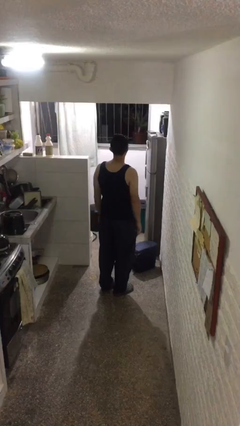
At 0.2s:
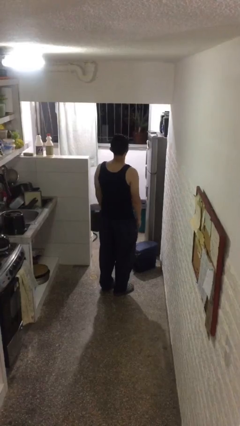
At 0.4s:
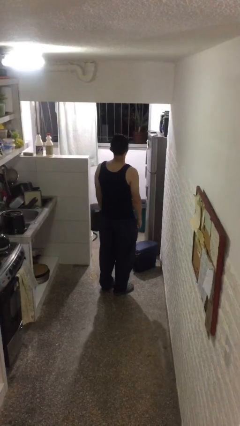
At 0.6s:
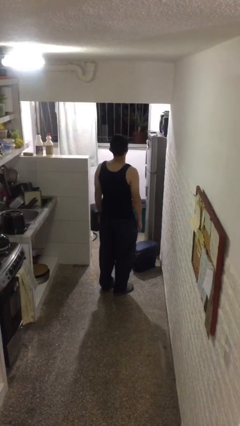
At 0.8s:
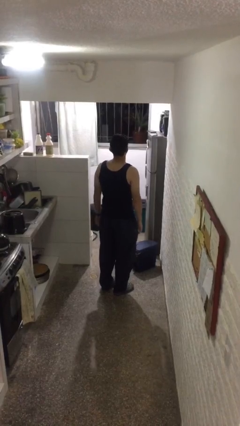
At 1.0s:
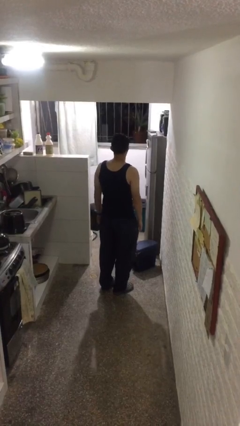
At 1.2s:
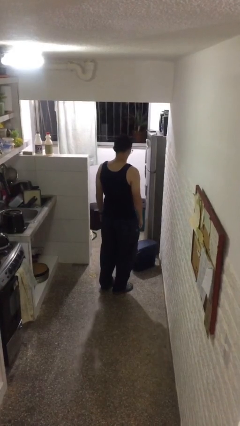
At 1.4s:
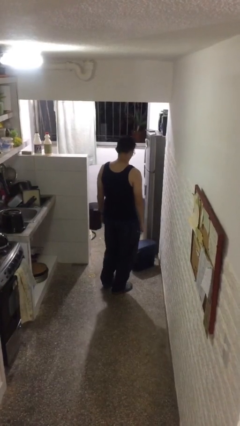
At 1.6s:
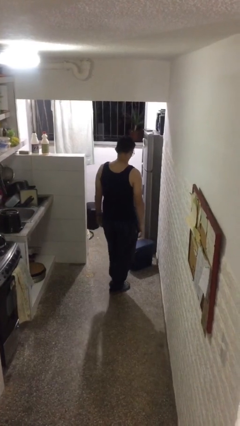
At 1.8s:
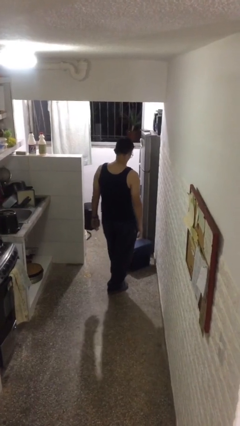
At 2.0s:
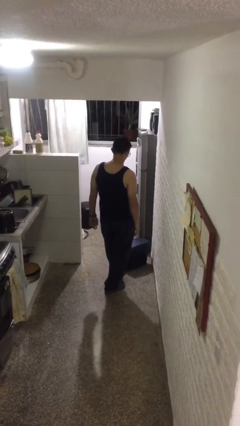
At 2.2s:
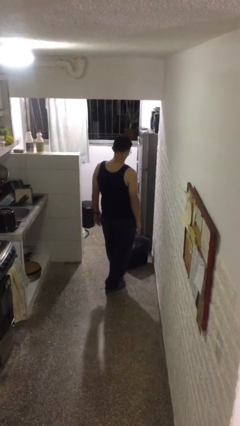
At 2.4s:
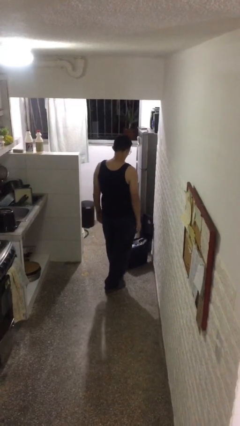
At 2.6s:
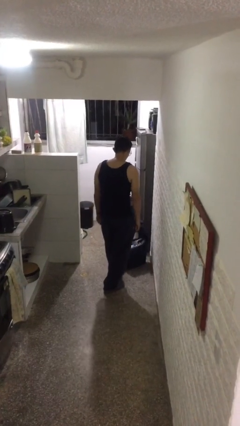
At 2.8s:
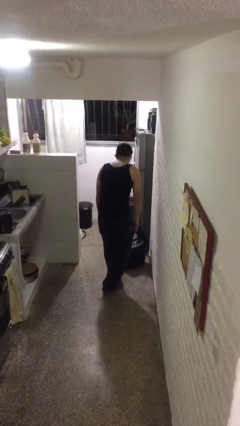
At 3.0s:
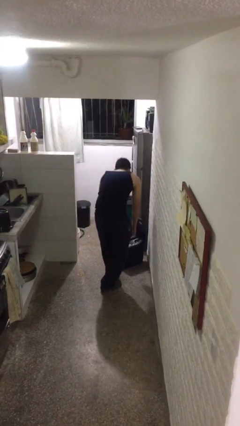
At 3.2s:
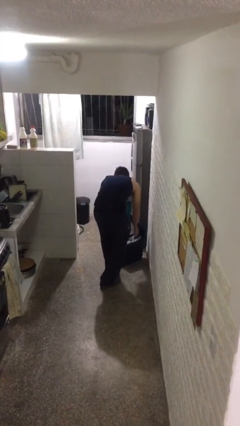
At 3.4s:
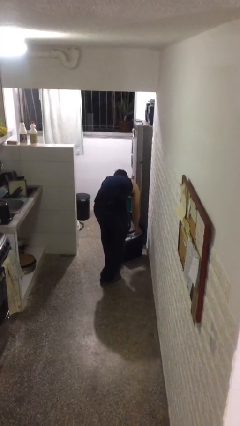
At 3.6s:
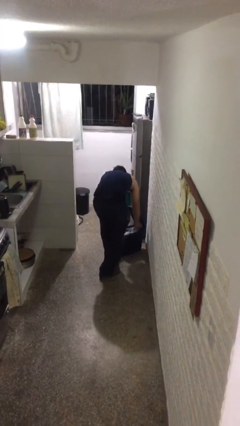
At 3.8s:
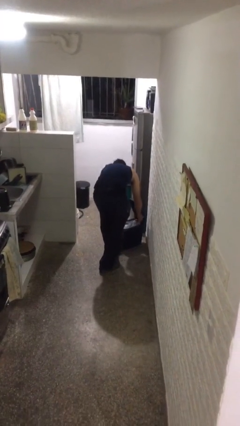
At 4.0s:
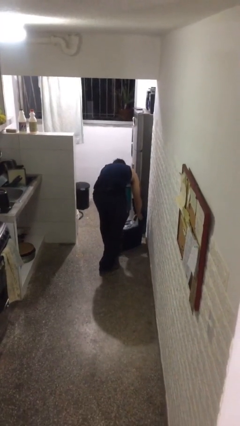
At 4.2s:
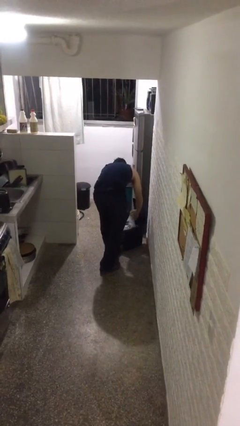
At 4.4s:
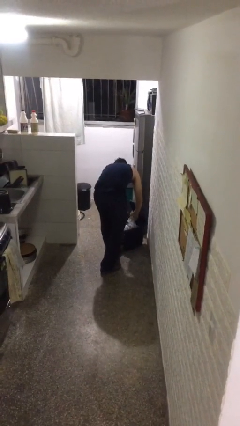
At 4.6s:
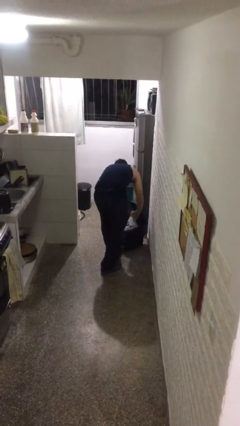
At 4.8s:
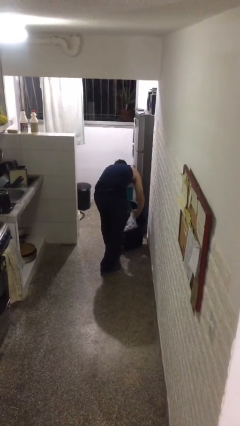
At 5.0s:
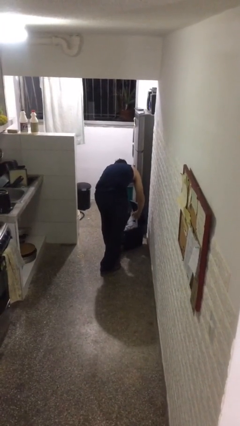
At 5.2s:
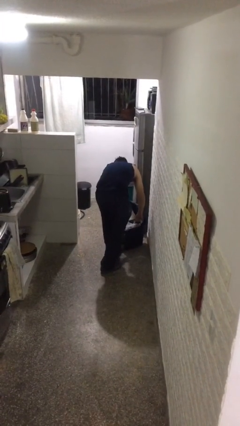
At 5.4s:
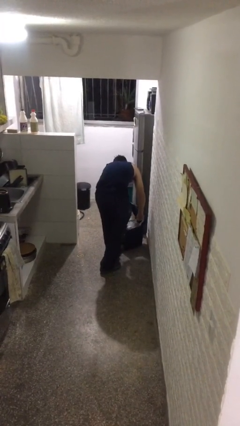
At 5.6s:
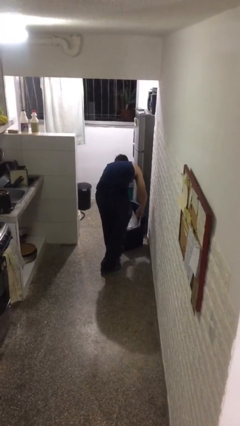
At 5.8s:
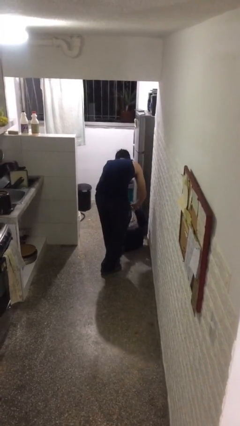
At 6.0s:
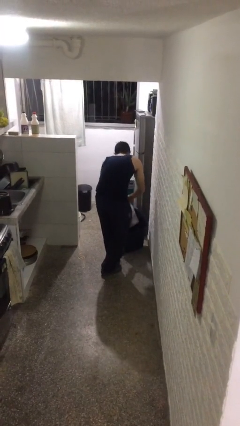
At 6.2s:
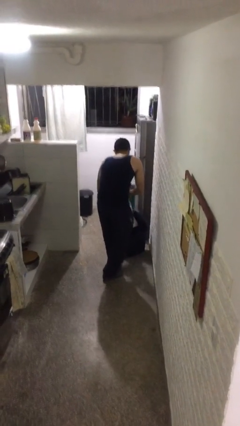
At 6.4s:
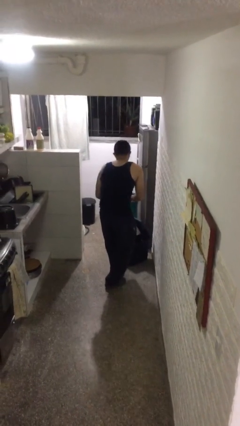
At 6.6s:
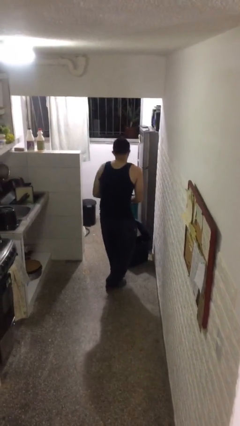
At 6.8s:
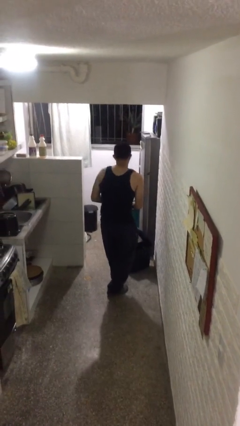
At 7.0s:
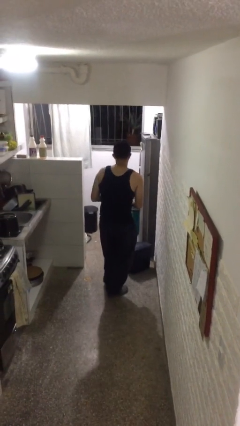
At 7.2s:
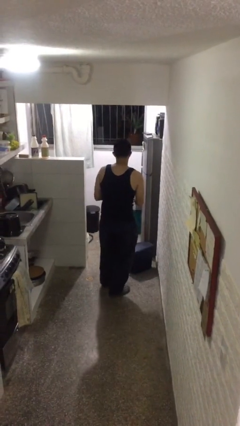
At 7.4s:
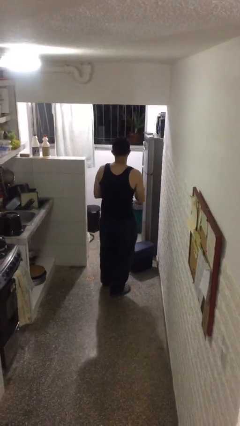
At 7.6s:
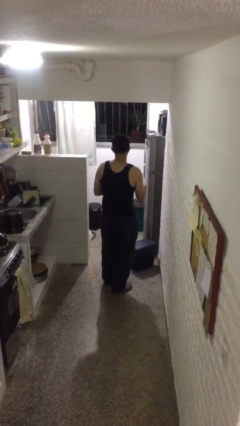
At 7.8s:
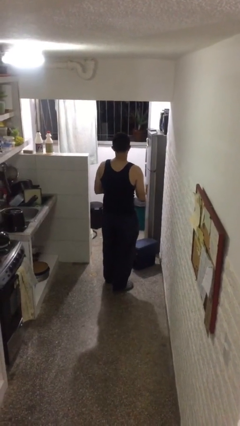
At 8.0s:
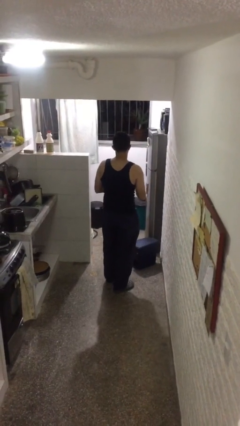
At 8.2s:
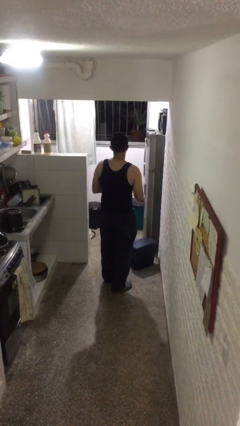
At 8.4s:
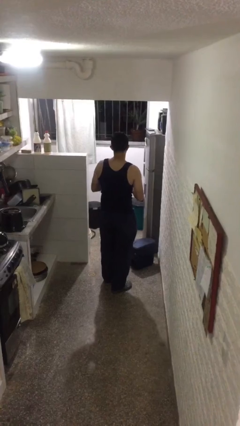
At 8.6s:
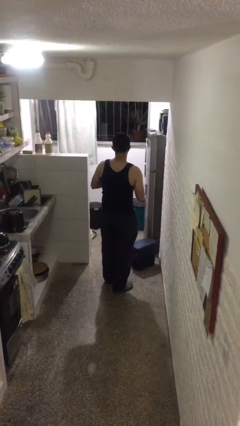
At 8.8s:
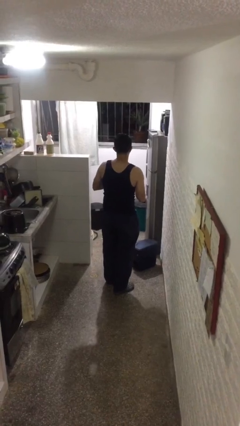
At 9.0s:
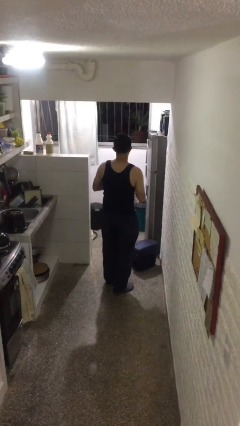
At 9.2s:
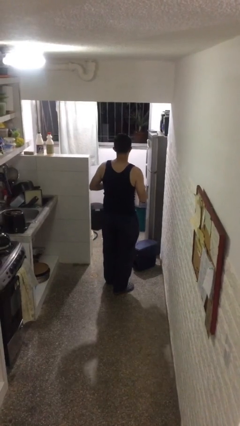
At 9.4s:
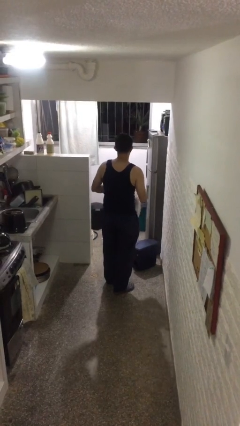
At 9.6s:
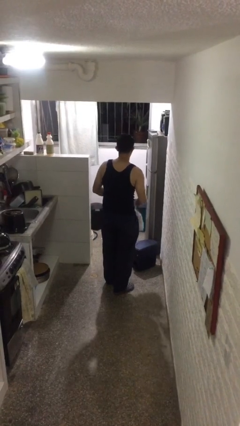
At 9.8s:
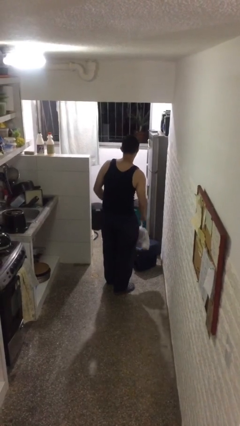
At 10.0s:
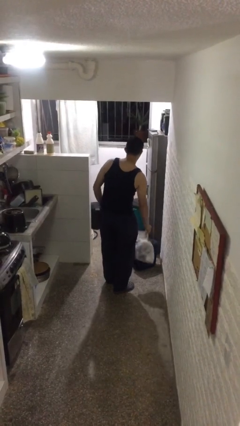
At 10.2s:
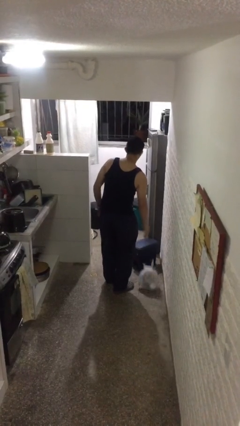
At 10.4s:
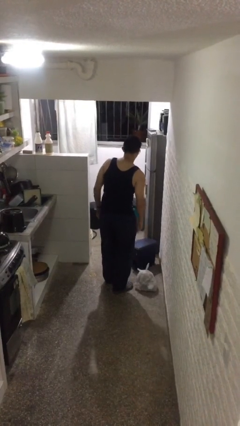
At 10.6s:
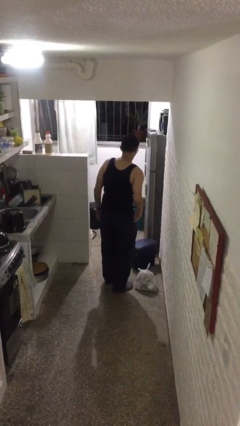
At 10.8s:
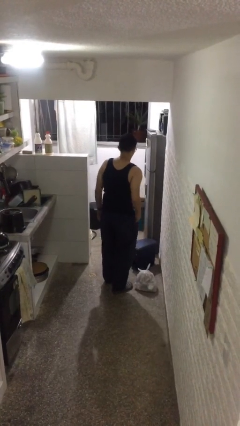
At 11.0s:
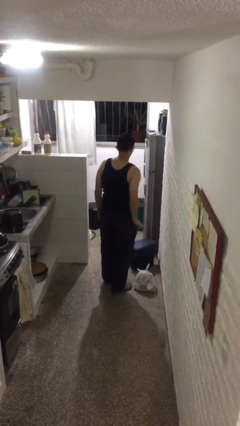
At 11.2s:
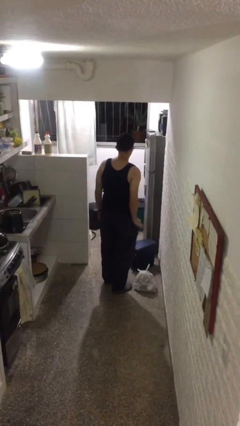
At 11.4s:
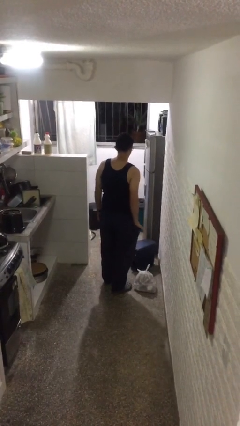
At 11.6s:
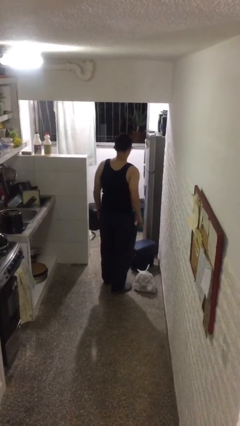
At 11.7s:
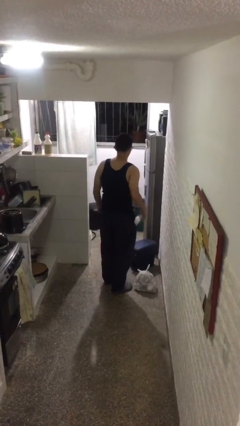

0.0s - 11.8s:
person removes trashbag from trashcan

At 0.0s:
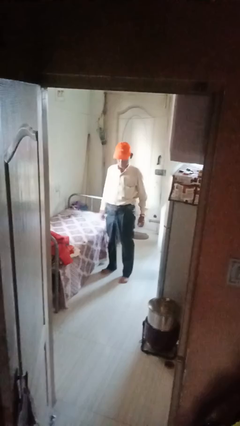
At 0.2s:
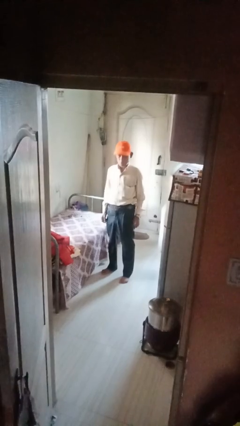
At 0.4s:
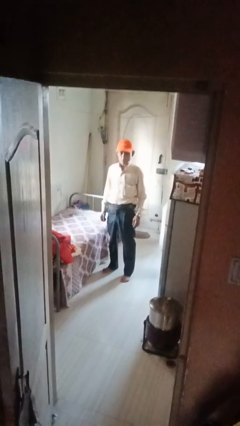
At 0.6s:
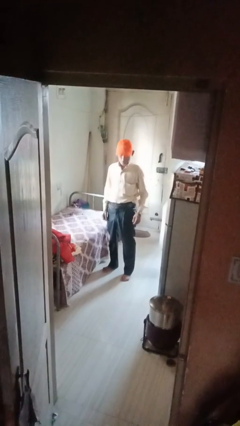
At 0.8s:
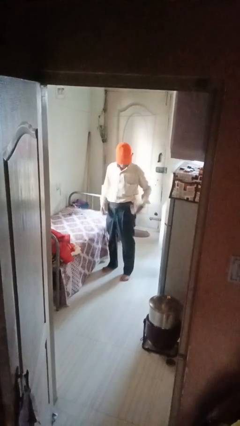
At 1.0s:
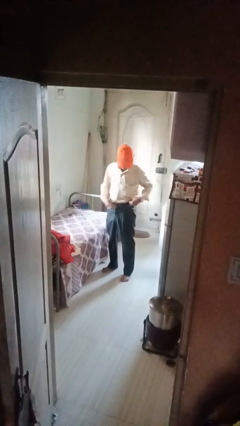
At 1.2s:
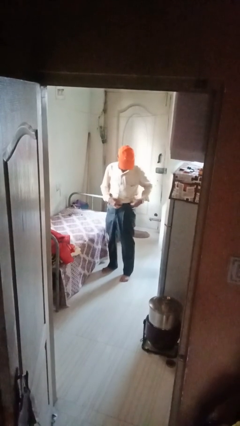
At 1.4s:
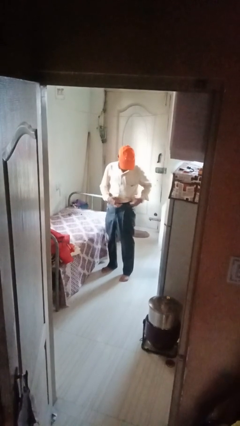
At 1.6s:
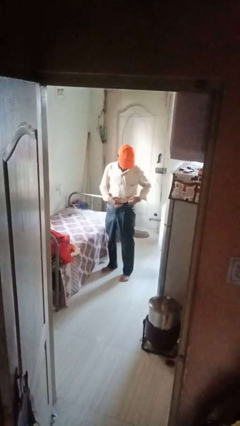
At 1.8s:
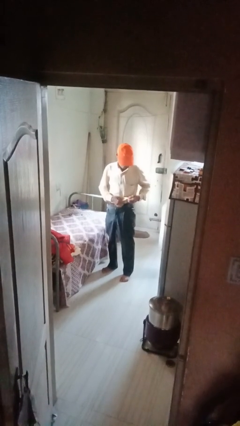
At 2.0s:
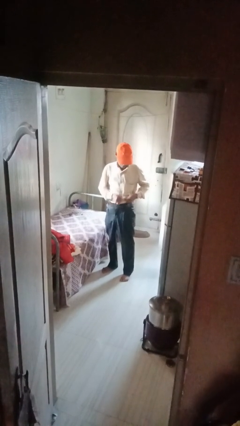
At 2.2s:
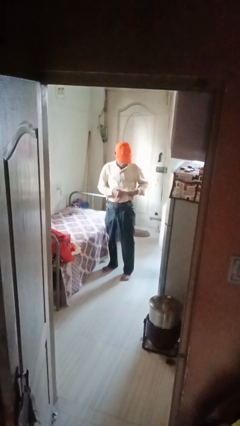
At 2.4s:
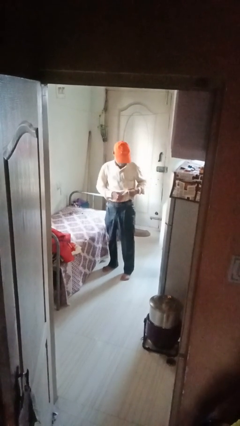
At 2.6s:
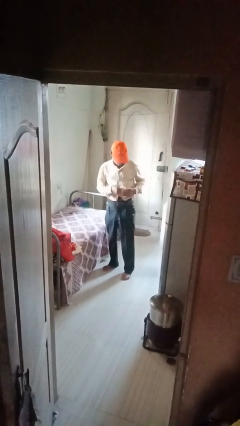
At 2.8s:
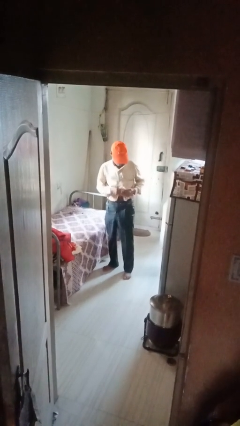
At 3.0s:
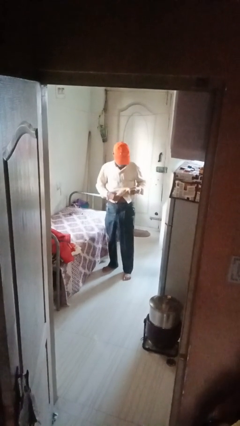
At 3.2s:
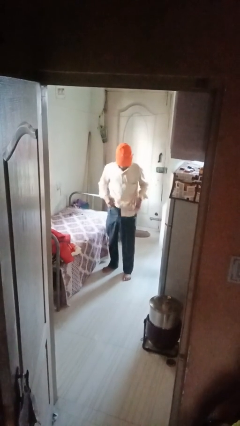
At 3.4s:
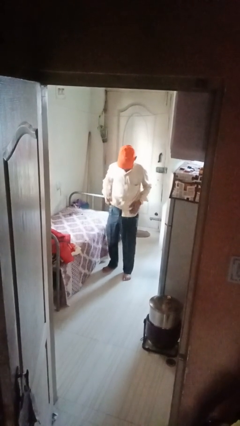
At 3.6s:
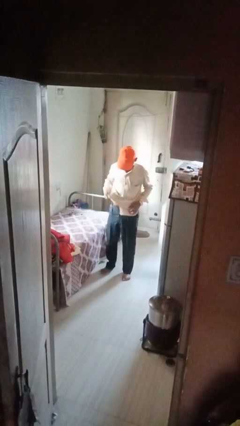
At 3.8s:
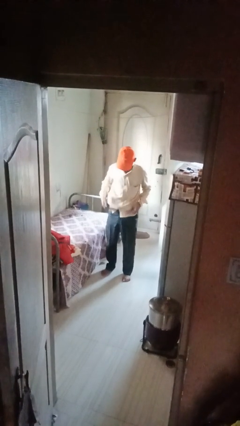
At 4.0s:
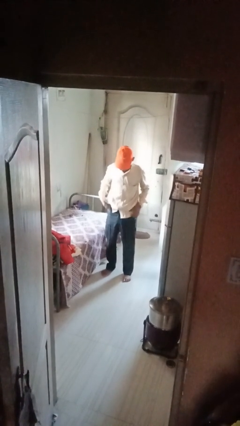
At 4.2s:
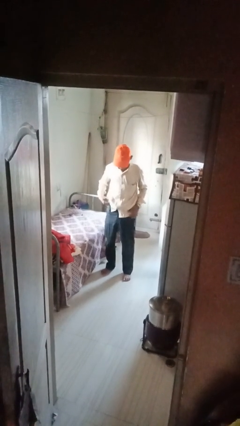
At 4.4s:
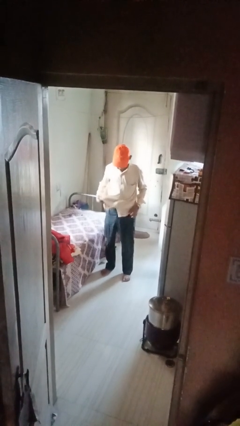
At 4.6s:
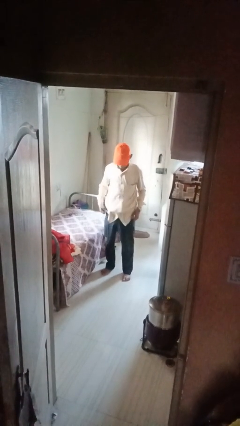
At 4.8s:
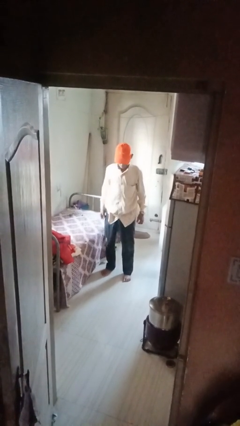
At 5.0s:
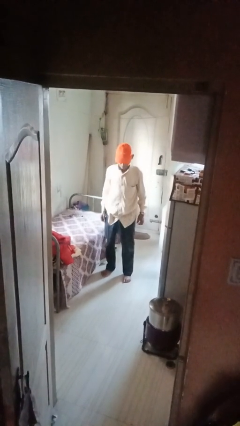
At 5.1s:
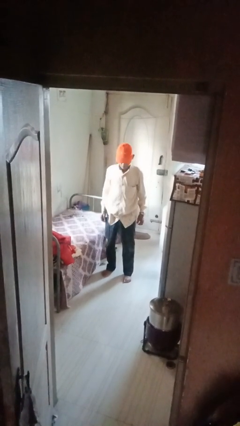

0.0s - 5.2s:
person untucks shirt

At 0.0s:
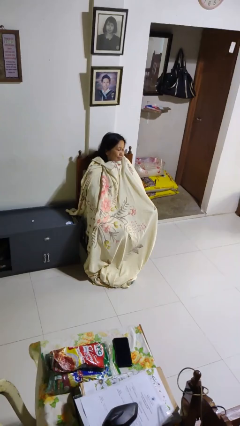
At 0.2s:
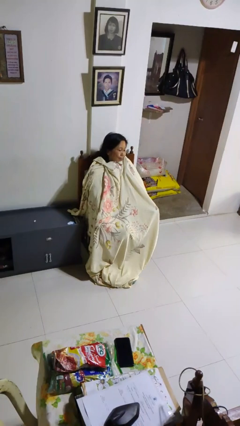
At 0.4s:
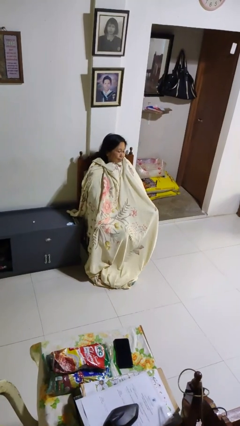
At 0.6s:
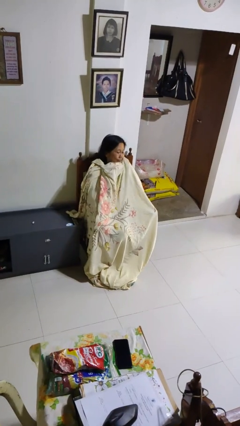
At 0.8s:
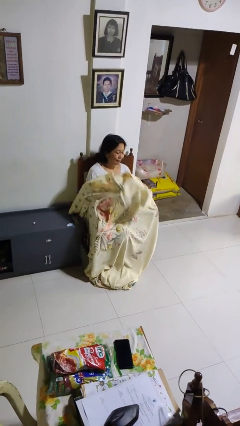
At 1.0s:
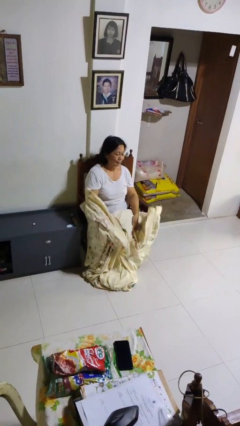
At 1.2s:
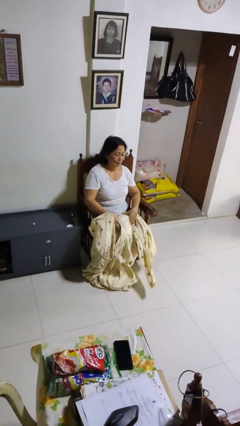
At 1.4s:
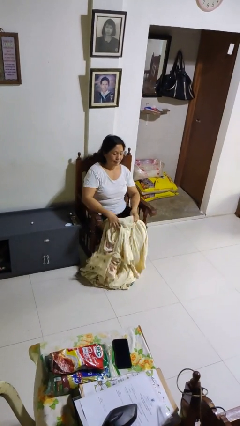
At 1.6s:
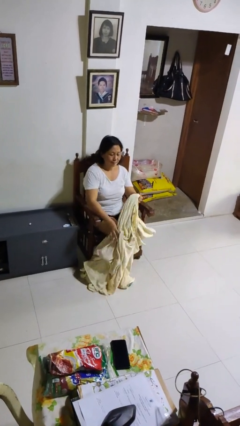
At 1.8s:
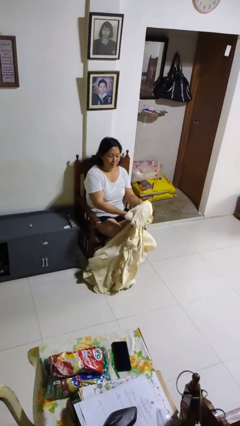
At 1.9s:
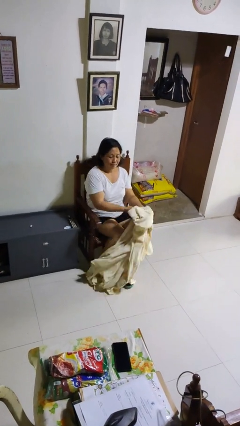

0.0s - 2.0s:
person uncovers with blanket
